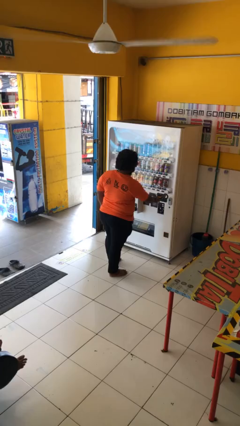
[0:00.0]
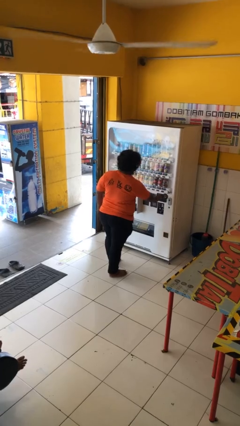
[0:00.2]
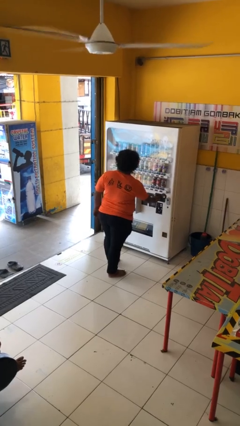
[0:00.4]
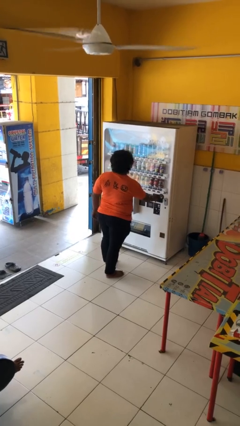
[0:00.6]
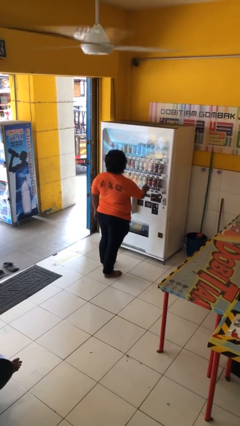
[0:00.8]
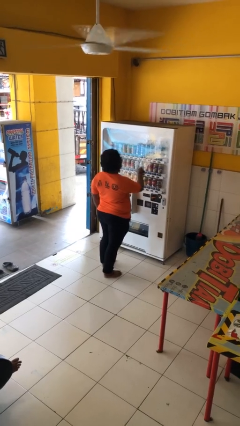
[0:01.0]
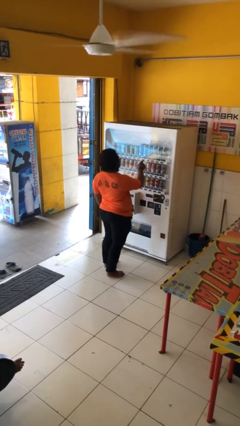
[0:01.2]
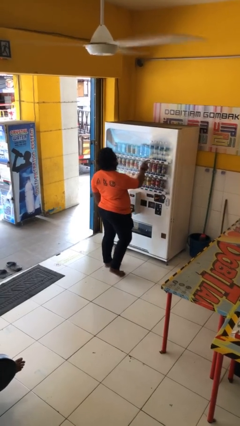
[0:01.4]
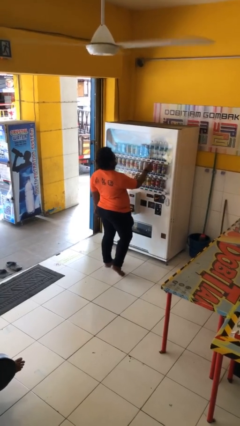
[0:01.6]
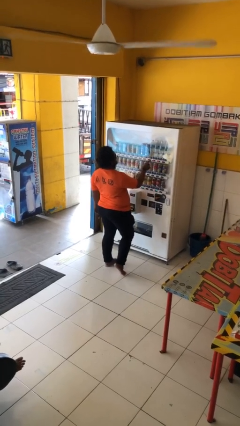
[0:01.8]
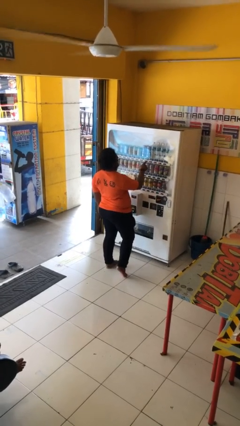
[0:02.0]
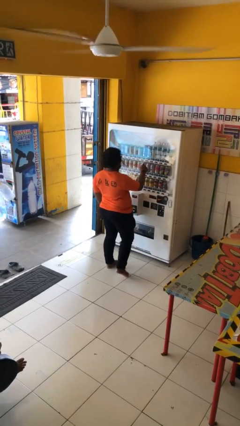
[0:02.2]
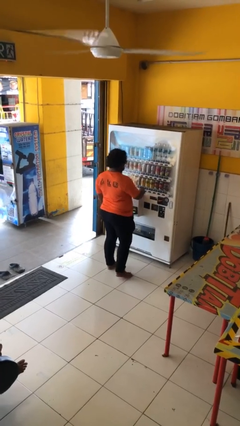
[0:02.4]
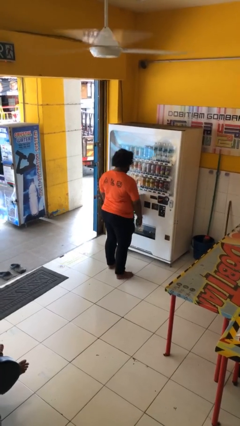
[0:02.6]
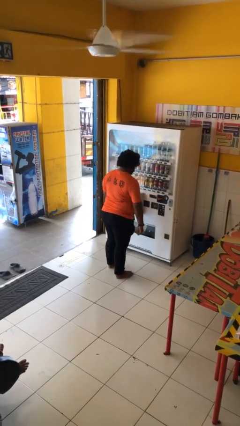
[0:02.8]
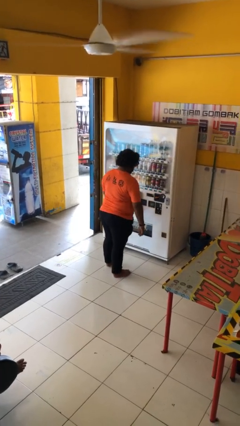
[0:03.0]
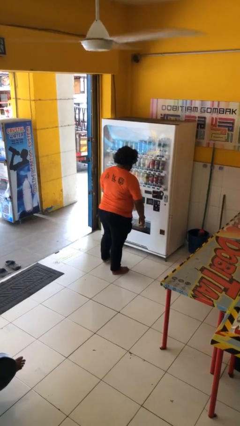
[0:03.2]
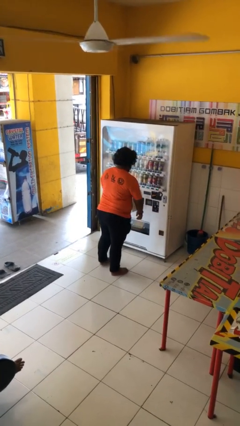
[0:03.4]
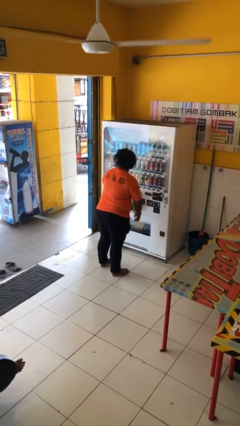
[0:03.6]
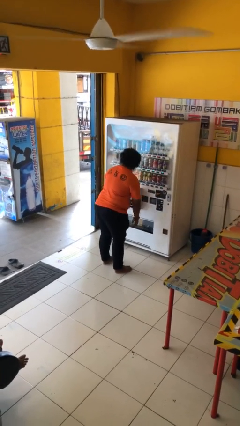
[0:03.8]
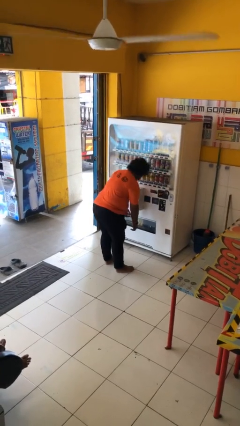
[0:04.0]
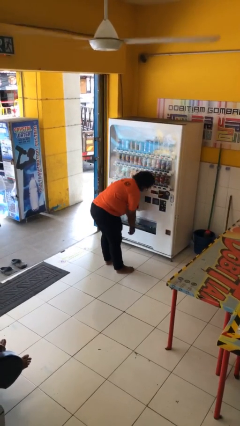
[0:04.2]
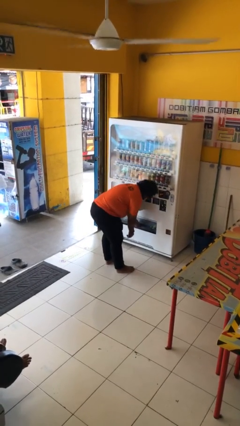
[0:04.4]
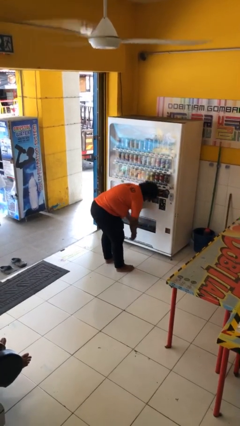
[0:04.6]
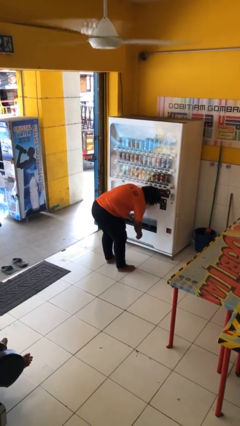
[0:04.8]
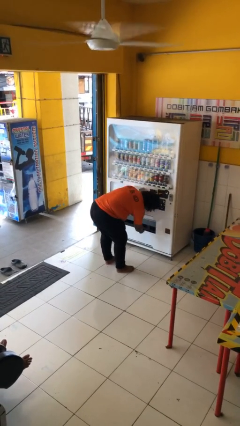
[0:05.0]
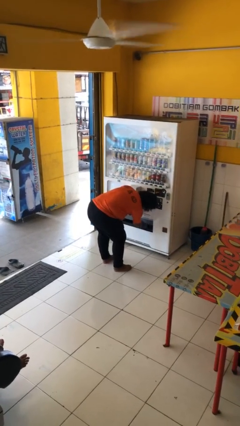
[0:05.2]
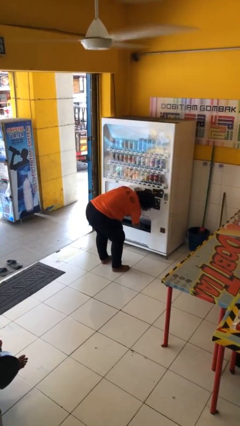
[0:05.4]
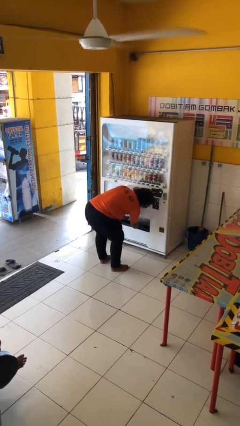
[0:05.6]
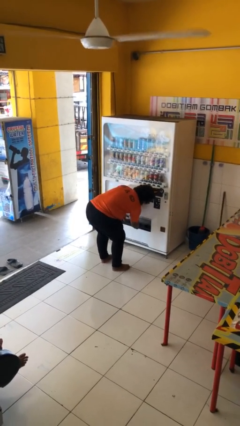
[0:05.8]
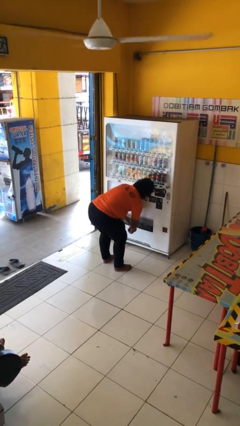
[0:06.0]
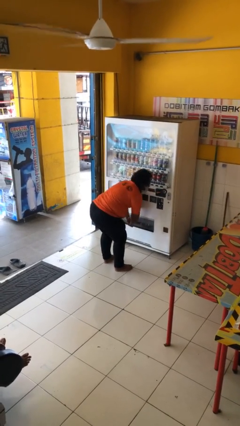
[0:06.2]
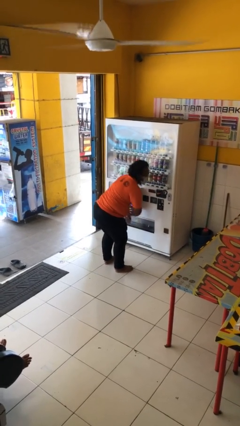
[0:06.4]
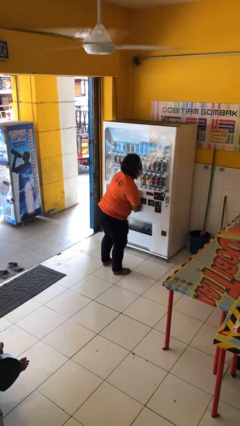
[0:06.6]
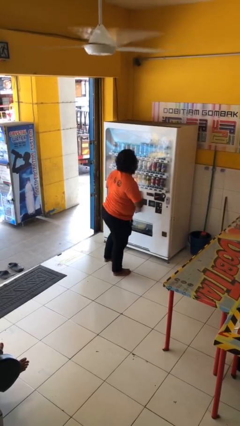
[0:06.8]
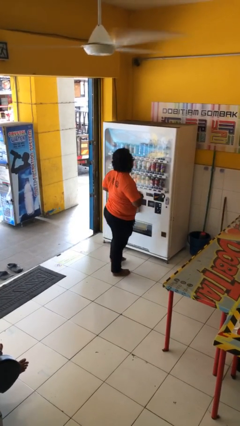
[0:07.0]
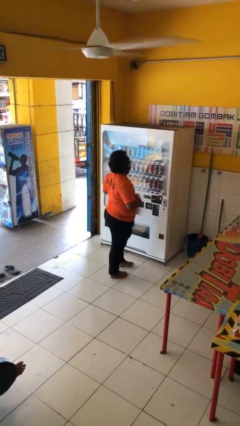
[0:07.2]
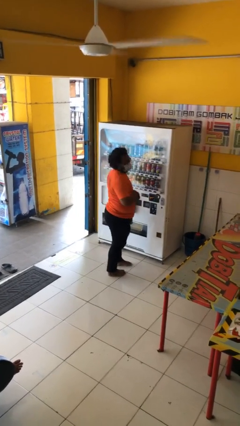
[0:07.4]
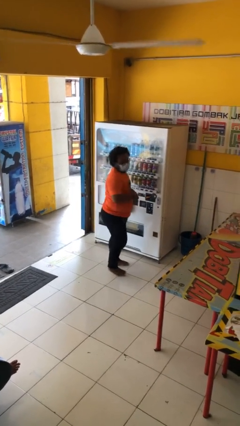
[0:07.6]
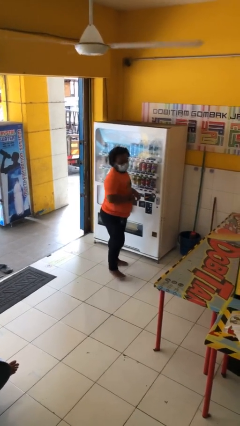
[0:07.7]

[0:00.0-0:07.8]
person purchases from machine

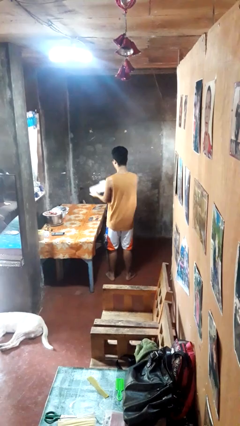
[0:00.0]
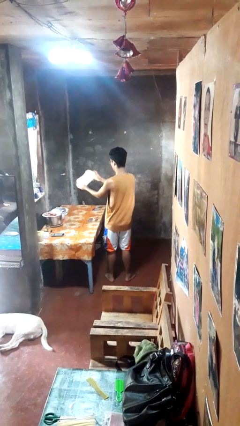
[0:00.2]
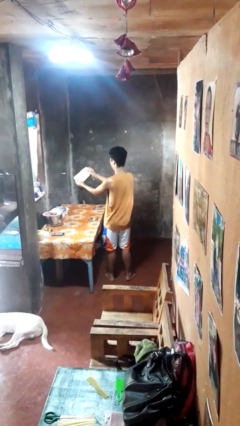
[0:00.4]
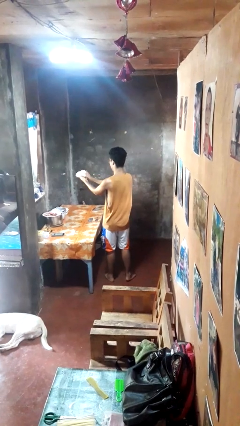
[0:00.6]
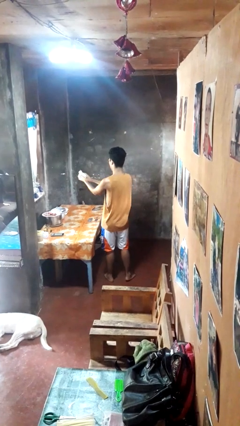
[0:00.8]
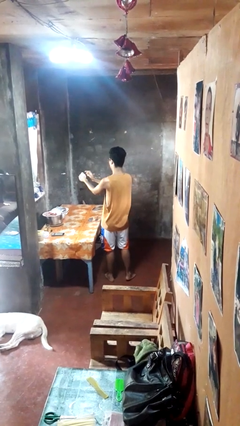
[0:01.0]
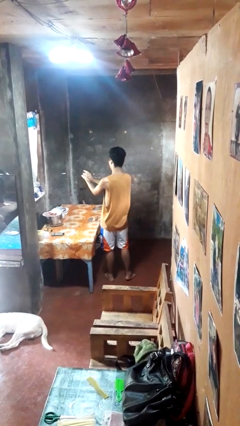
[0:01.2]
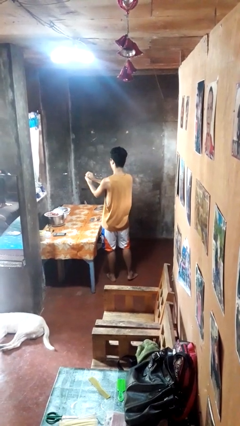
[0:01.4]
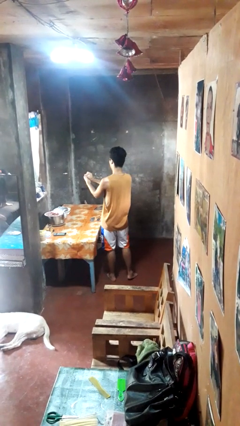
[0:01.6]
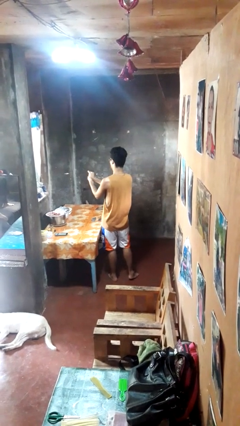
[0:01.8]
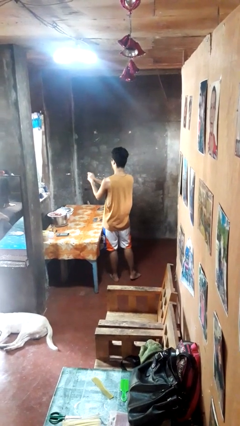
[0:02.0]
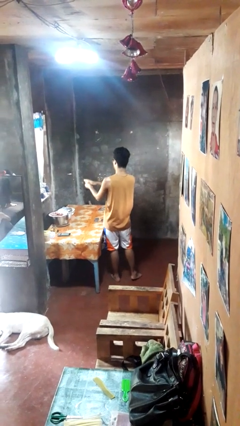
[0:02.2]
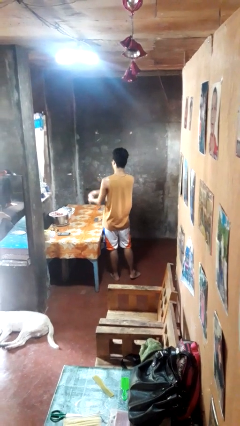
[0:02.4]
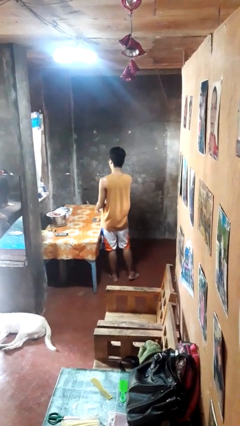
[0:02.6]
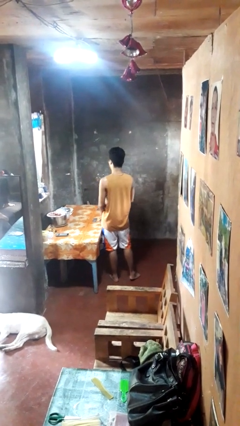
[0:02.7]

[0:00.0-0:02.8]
person crumples paper

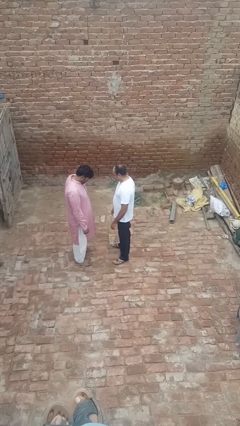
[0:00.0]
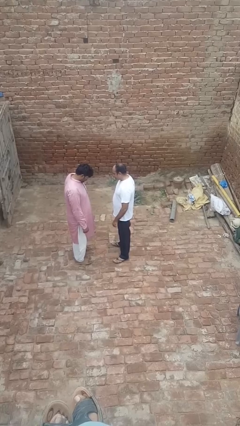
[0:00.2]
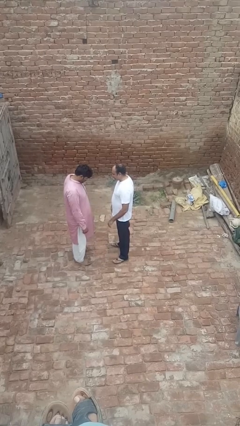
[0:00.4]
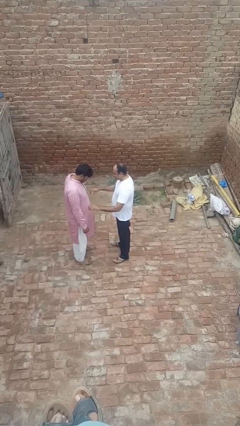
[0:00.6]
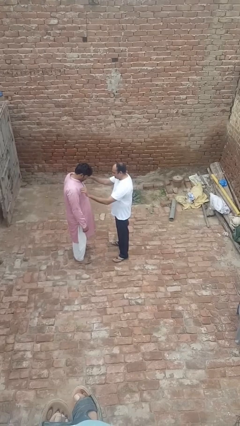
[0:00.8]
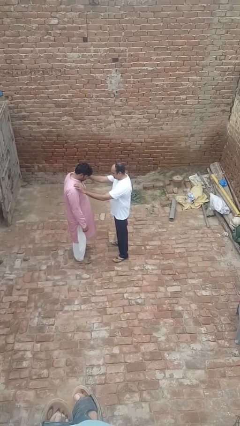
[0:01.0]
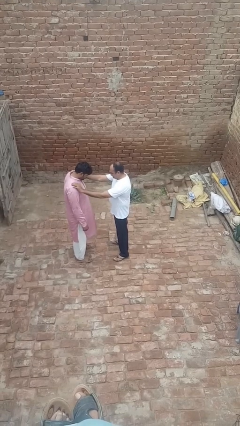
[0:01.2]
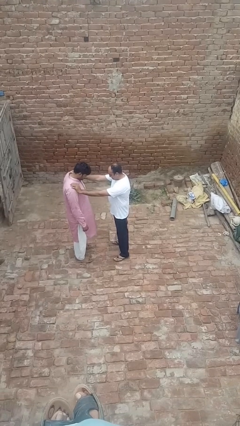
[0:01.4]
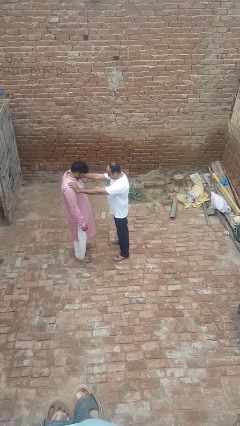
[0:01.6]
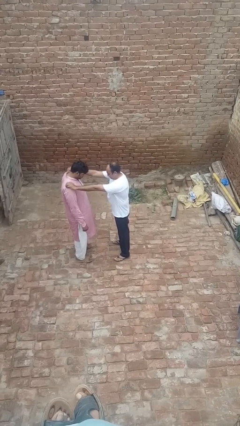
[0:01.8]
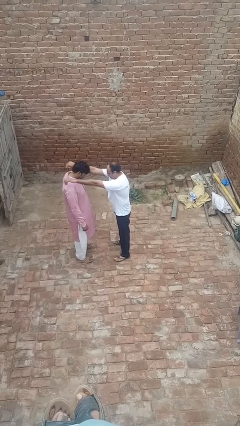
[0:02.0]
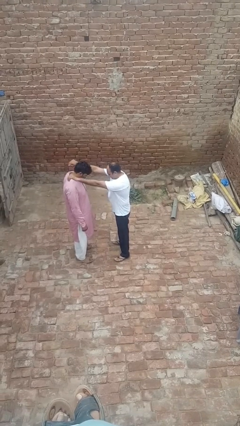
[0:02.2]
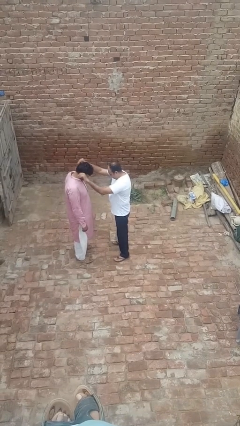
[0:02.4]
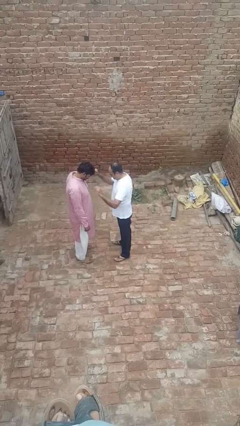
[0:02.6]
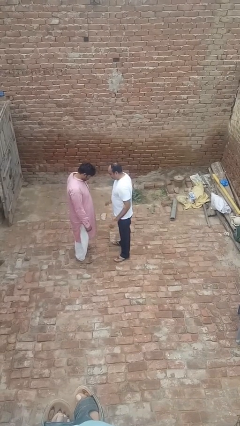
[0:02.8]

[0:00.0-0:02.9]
person shoves person

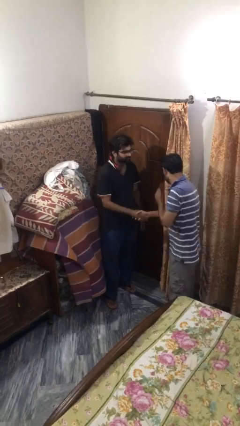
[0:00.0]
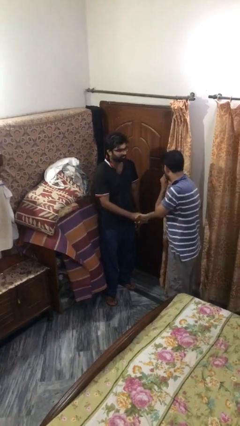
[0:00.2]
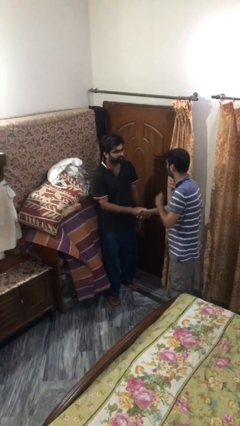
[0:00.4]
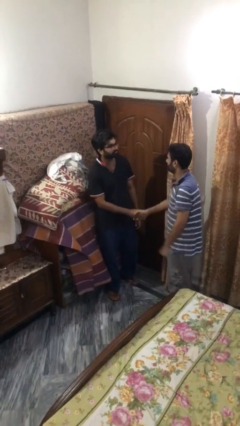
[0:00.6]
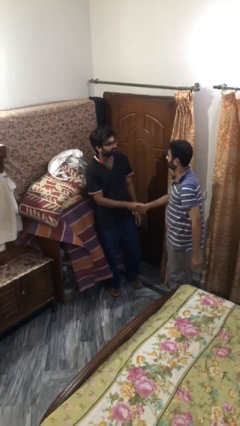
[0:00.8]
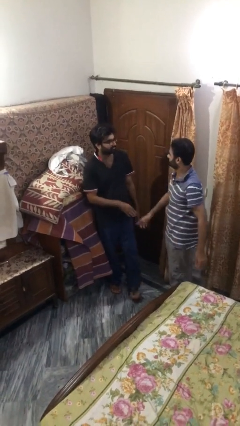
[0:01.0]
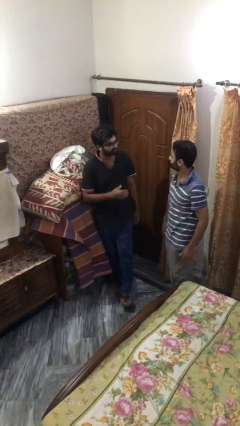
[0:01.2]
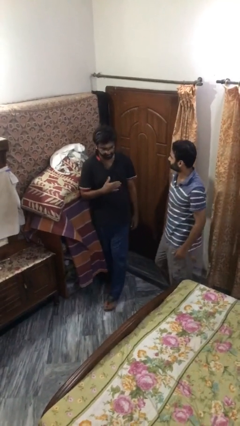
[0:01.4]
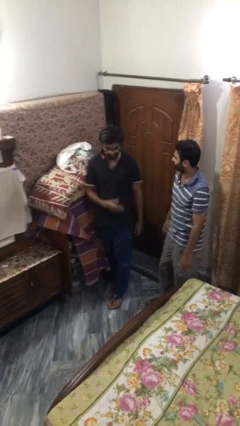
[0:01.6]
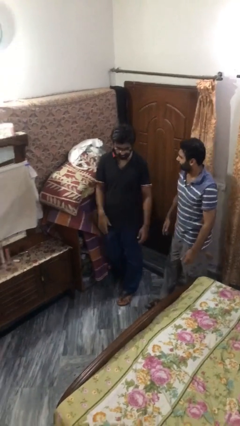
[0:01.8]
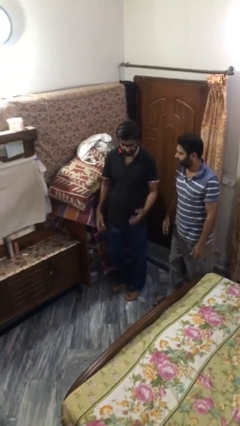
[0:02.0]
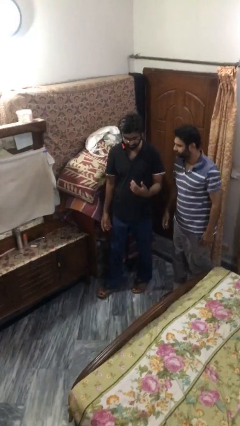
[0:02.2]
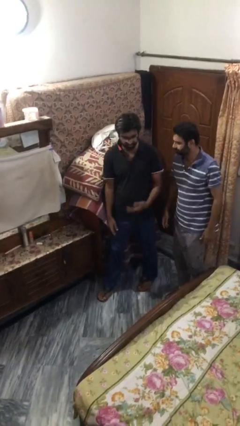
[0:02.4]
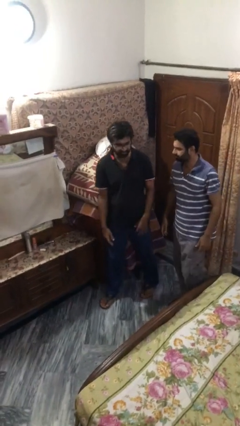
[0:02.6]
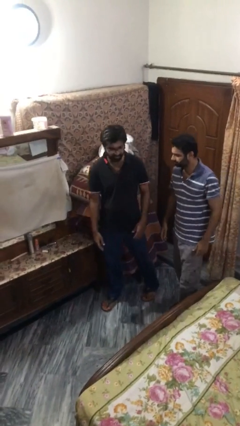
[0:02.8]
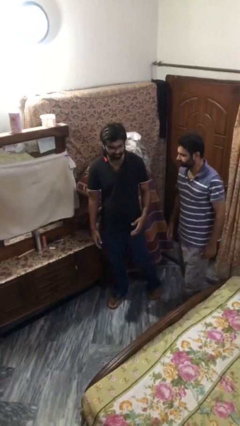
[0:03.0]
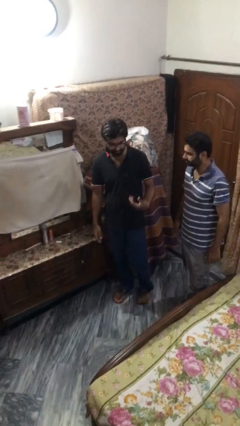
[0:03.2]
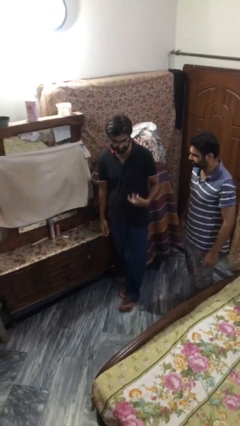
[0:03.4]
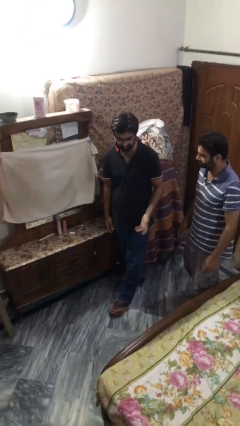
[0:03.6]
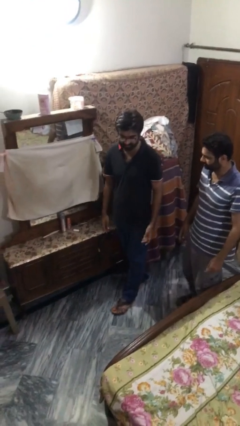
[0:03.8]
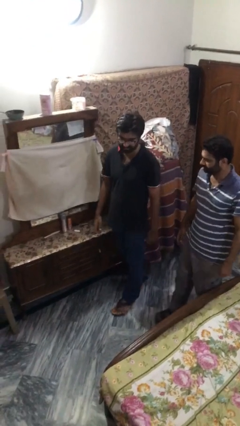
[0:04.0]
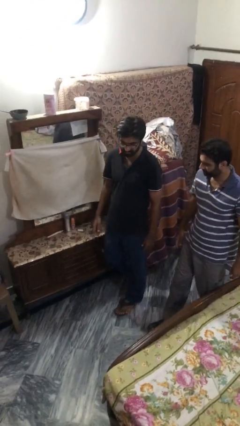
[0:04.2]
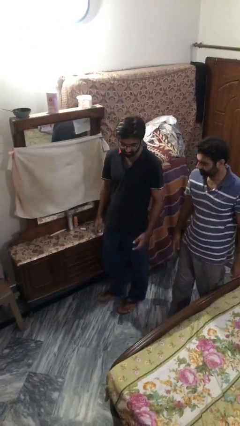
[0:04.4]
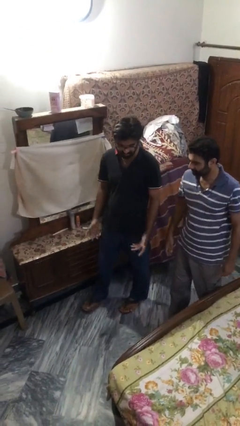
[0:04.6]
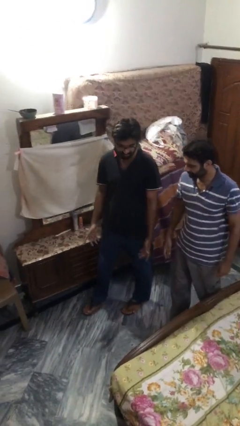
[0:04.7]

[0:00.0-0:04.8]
person talks to person
